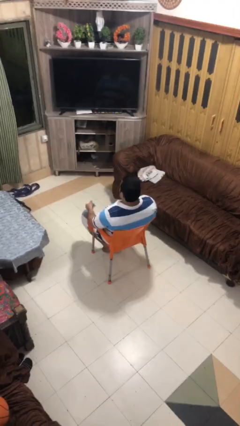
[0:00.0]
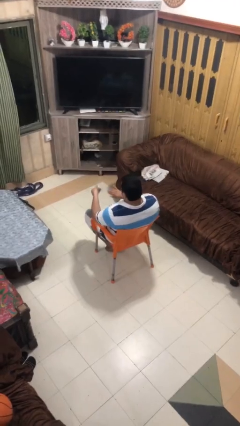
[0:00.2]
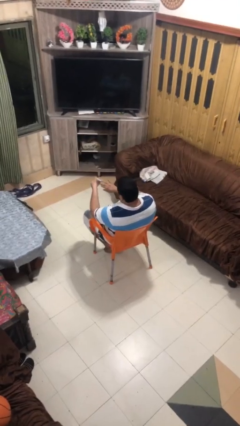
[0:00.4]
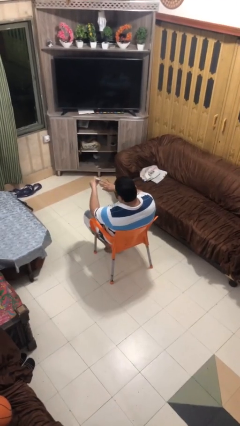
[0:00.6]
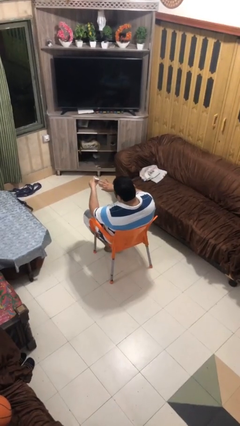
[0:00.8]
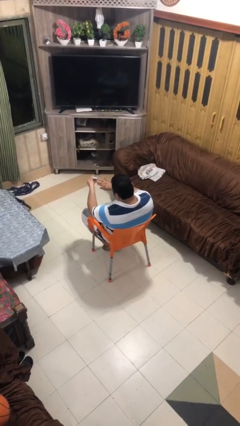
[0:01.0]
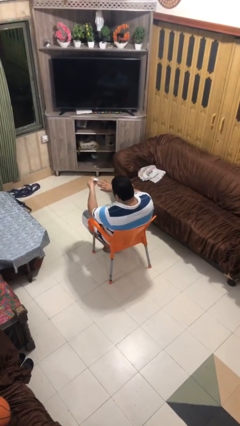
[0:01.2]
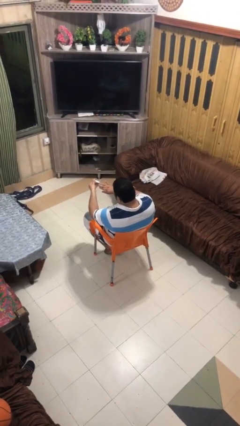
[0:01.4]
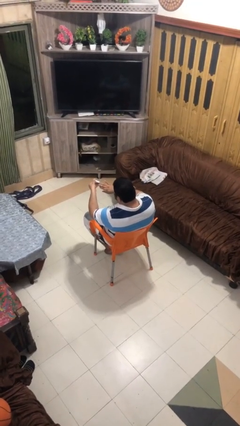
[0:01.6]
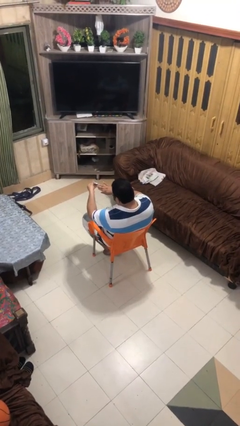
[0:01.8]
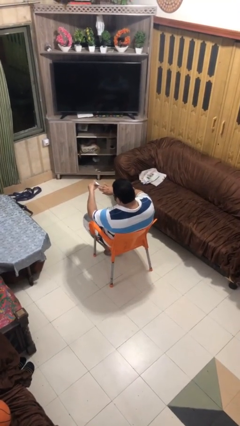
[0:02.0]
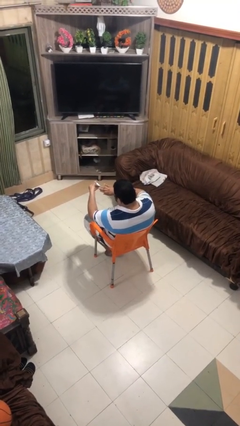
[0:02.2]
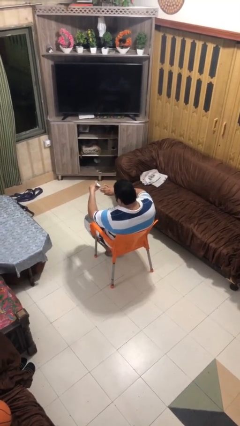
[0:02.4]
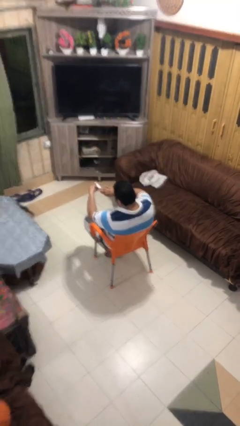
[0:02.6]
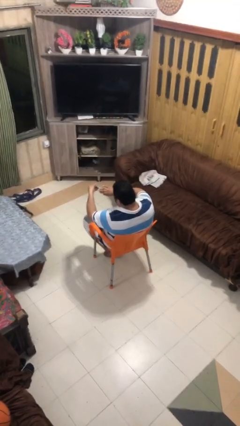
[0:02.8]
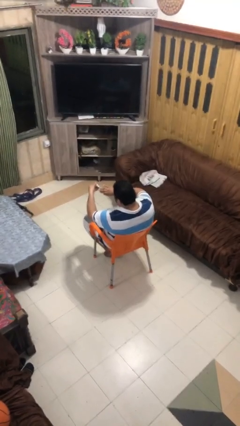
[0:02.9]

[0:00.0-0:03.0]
person clips fingernails

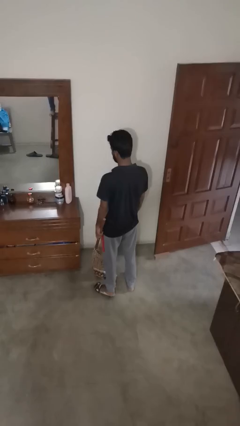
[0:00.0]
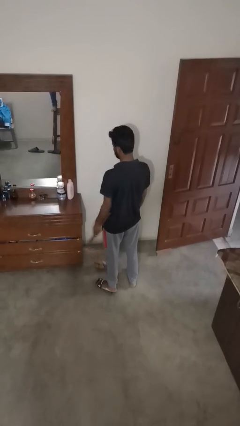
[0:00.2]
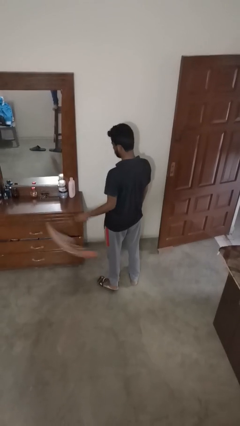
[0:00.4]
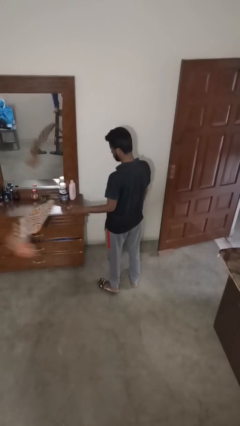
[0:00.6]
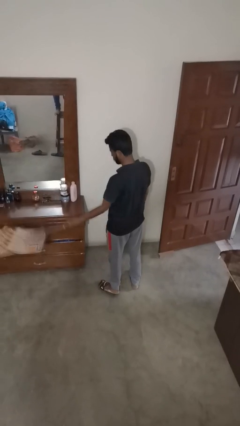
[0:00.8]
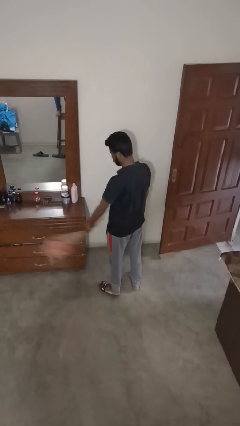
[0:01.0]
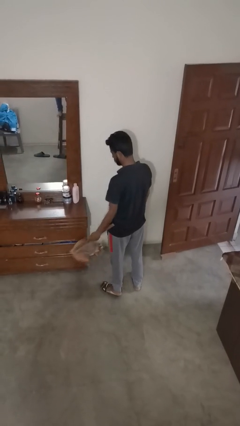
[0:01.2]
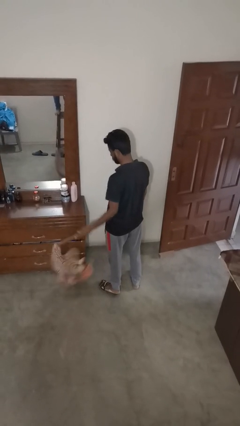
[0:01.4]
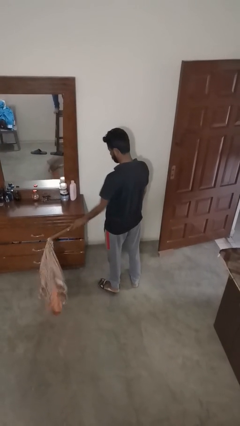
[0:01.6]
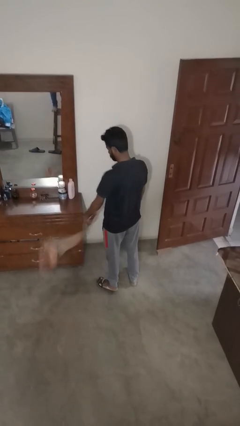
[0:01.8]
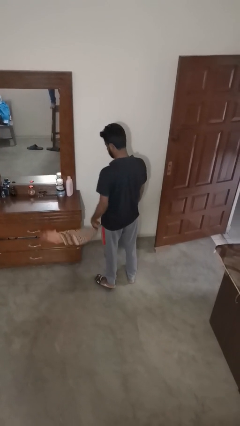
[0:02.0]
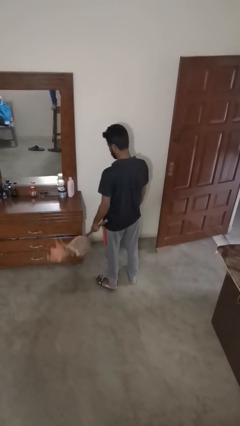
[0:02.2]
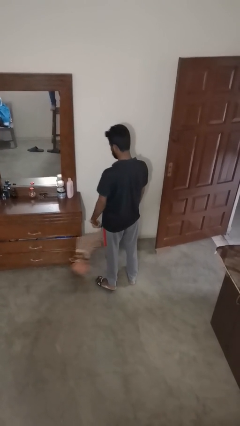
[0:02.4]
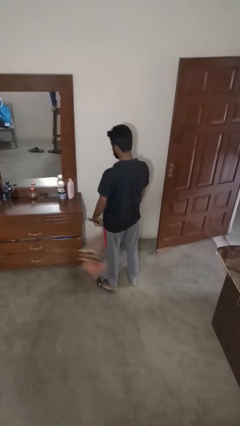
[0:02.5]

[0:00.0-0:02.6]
person dusts furniture

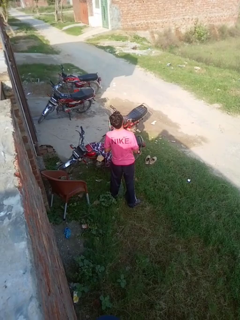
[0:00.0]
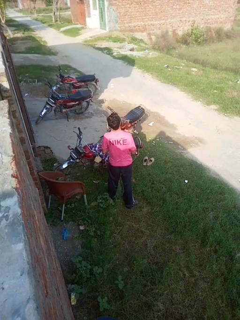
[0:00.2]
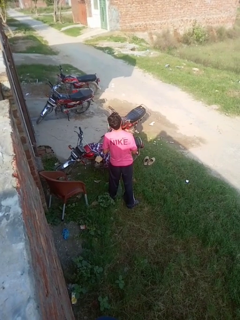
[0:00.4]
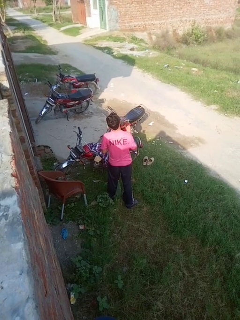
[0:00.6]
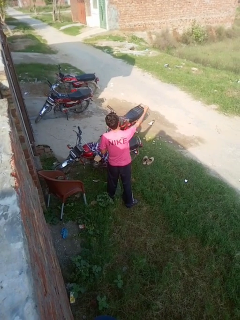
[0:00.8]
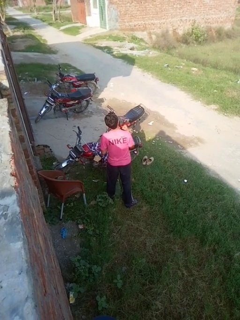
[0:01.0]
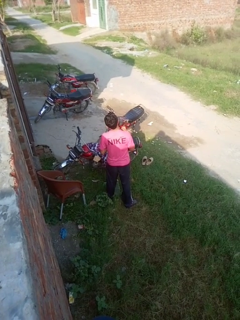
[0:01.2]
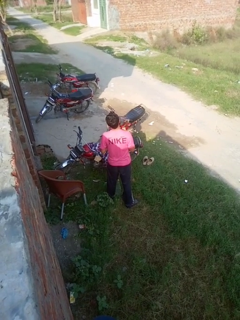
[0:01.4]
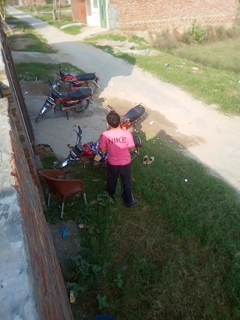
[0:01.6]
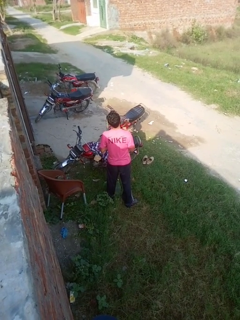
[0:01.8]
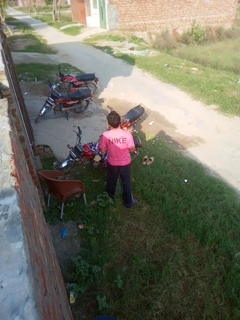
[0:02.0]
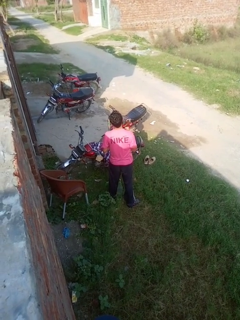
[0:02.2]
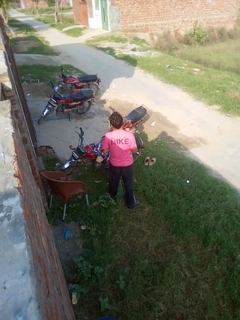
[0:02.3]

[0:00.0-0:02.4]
person punches

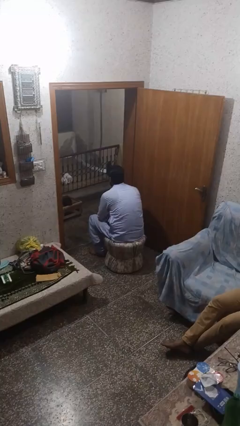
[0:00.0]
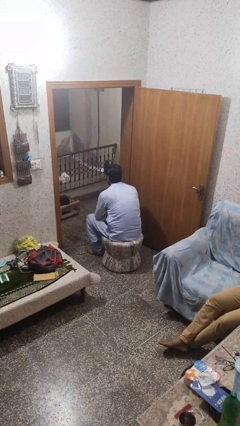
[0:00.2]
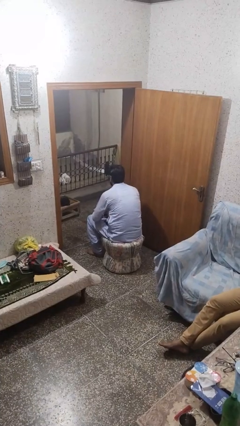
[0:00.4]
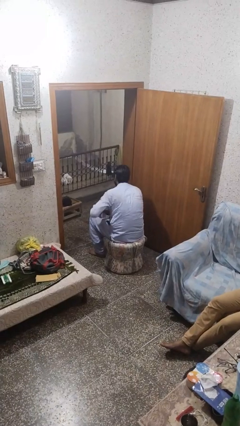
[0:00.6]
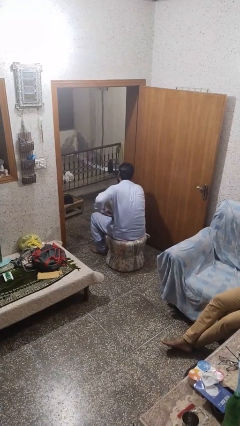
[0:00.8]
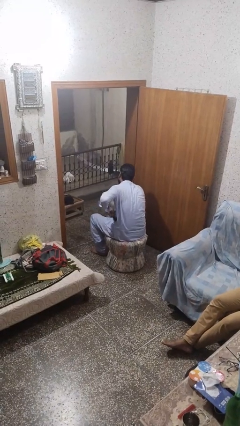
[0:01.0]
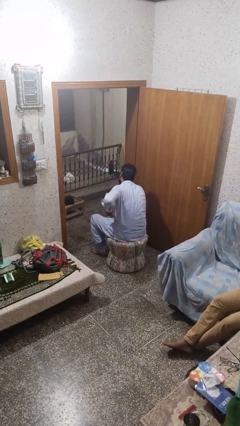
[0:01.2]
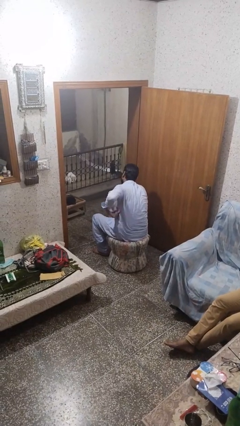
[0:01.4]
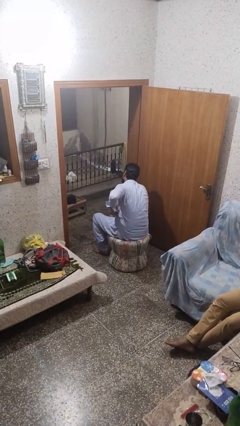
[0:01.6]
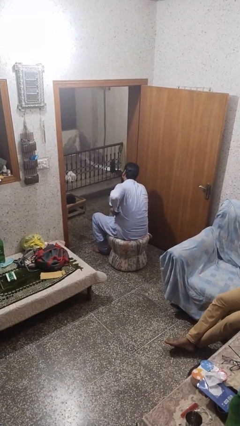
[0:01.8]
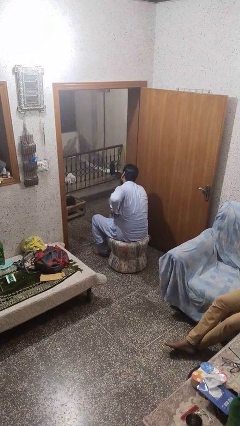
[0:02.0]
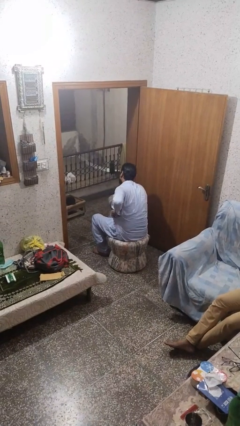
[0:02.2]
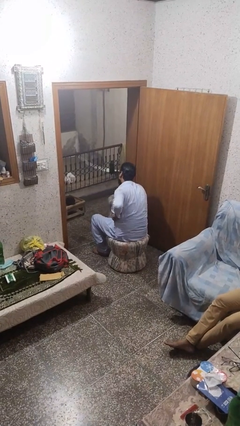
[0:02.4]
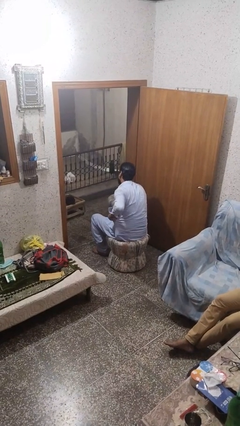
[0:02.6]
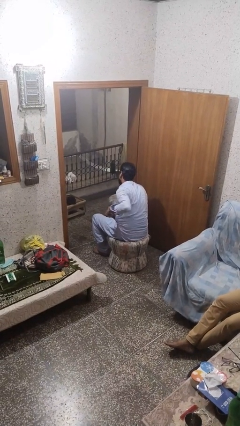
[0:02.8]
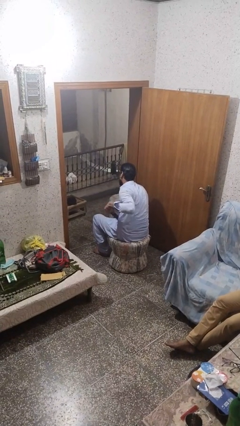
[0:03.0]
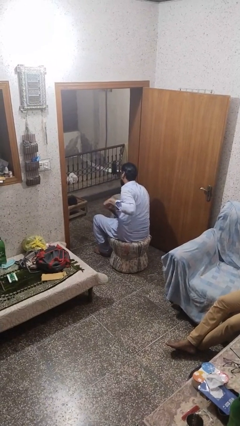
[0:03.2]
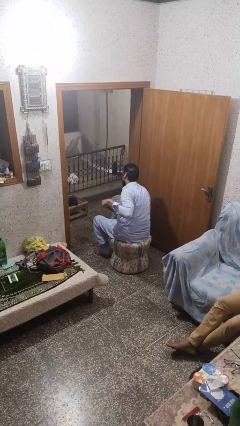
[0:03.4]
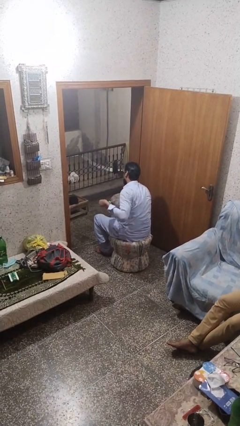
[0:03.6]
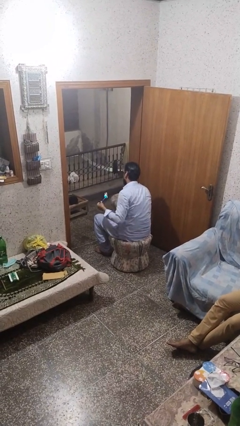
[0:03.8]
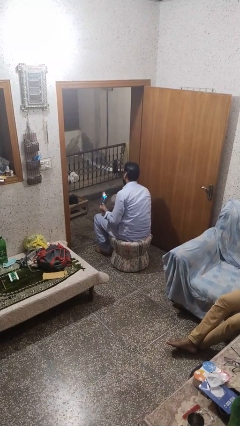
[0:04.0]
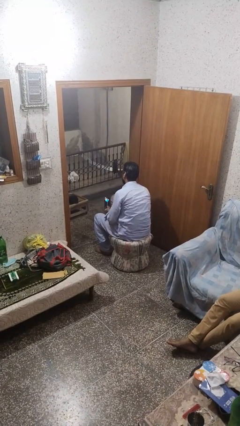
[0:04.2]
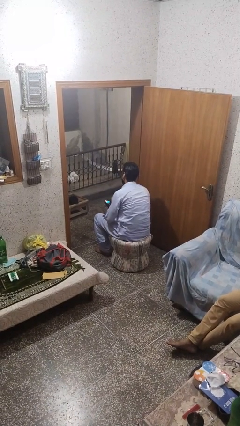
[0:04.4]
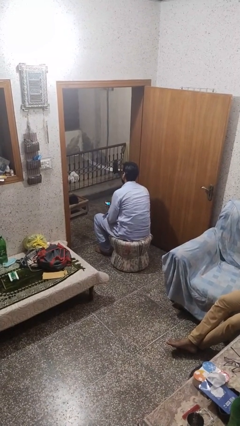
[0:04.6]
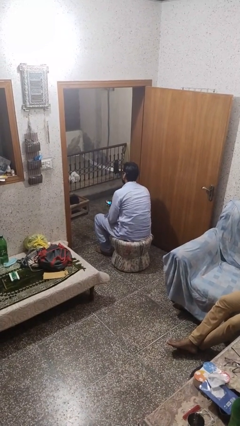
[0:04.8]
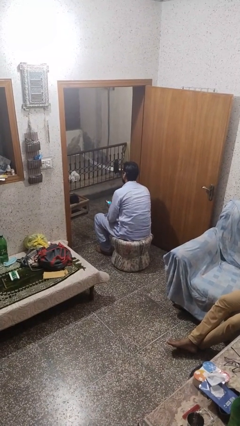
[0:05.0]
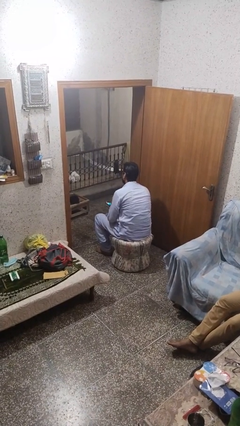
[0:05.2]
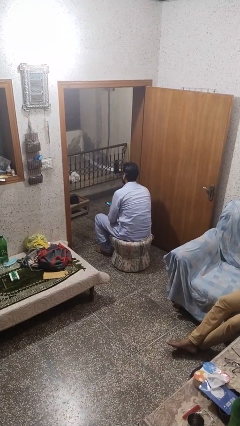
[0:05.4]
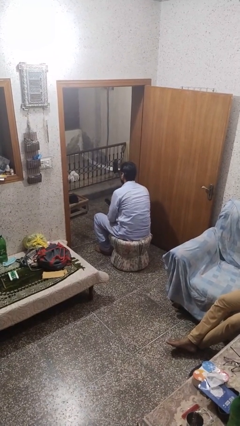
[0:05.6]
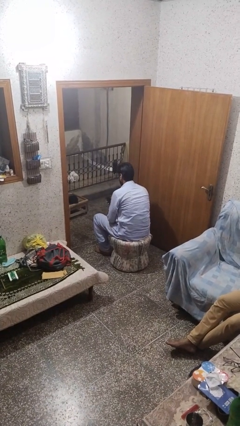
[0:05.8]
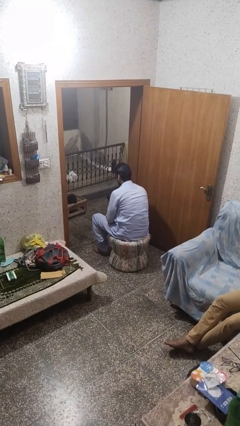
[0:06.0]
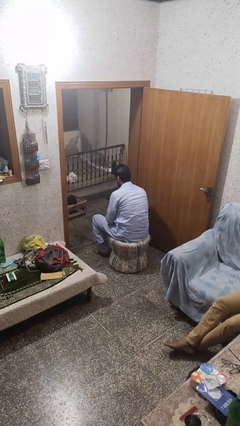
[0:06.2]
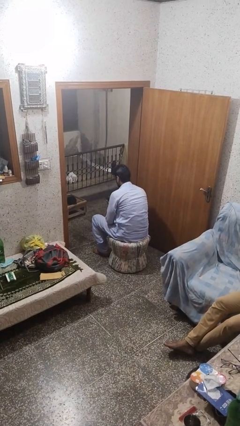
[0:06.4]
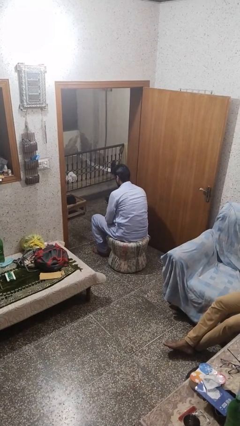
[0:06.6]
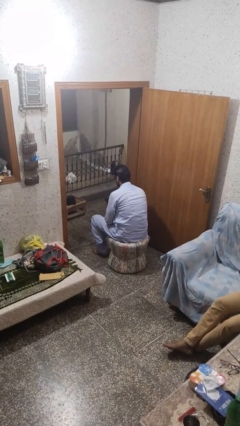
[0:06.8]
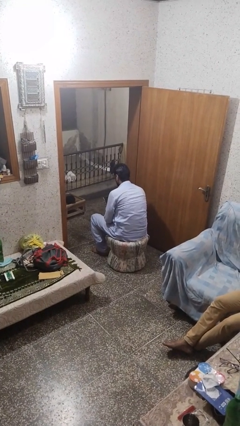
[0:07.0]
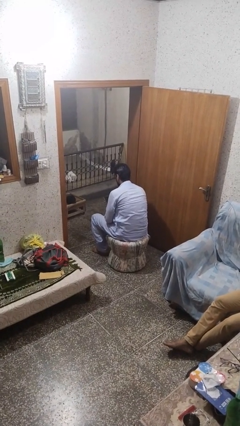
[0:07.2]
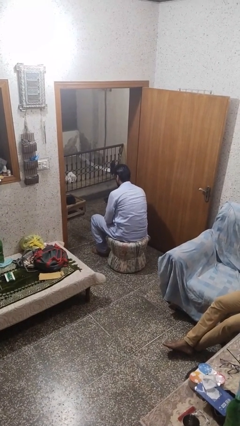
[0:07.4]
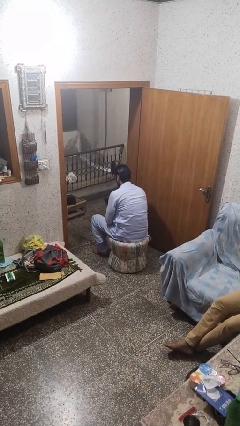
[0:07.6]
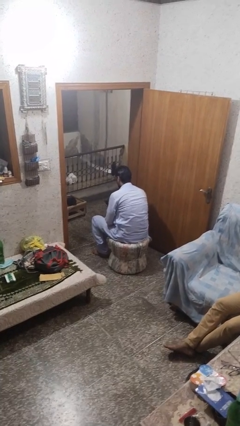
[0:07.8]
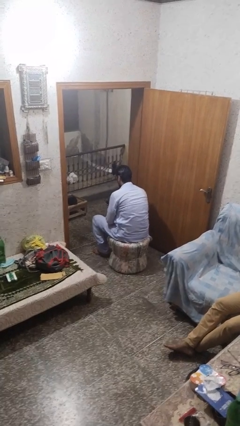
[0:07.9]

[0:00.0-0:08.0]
person takes phone from pocket

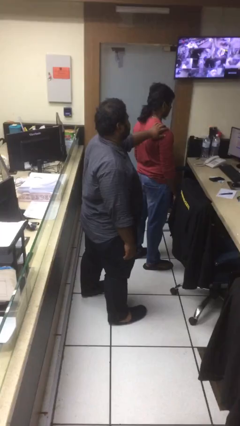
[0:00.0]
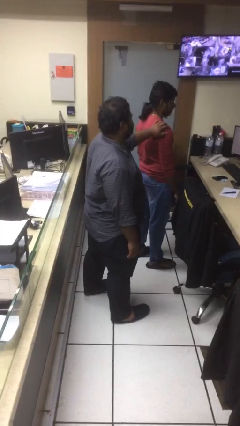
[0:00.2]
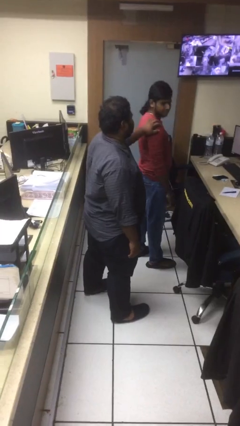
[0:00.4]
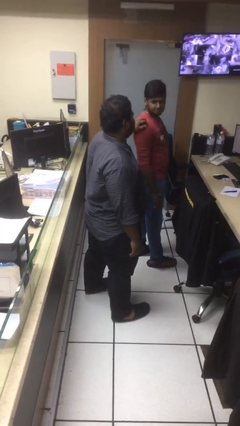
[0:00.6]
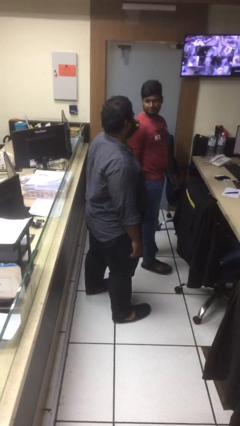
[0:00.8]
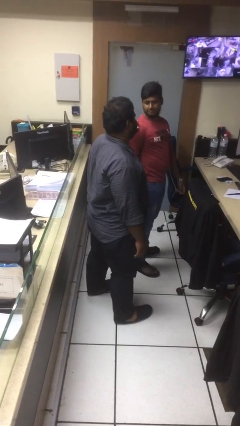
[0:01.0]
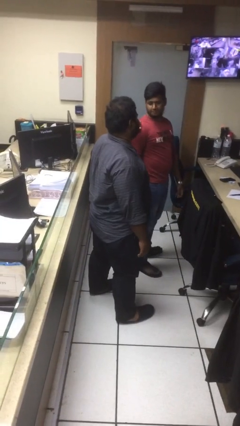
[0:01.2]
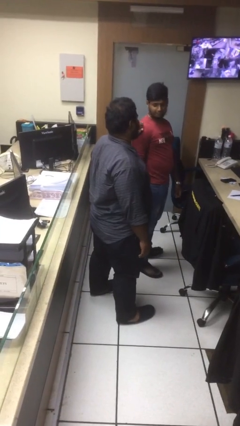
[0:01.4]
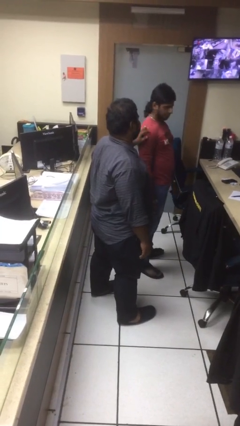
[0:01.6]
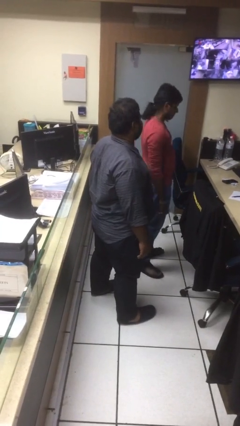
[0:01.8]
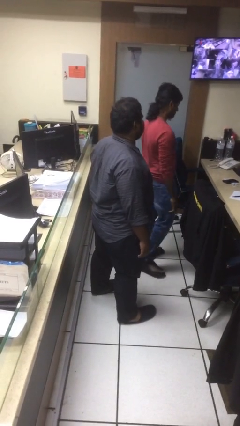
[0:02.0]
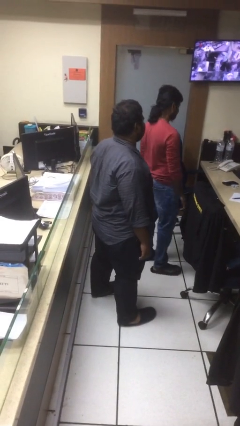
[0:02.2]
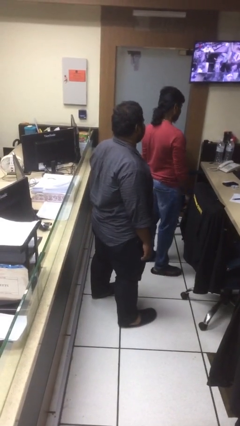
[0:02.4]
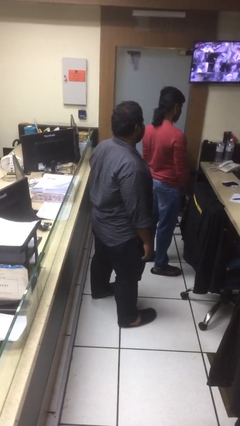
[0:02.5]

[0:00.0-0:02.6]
person spins person around
